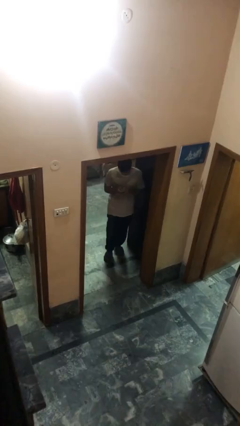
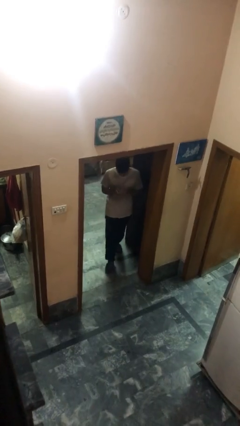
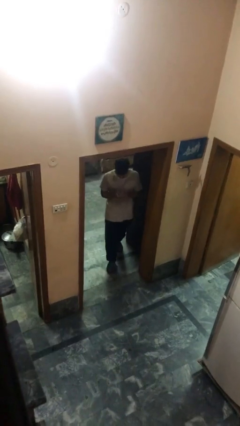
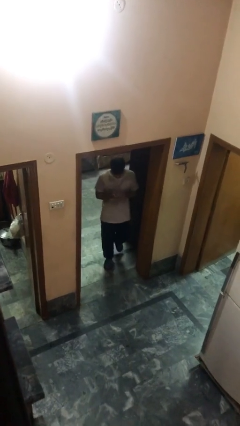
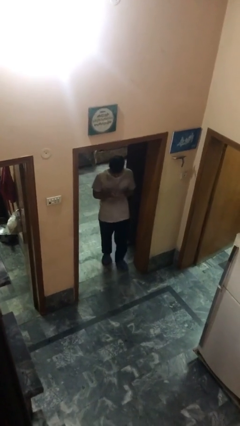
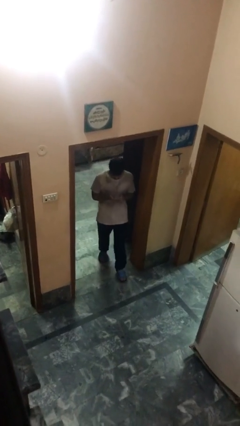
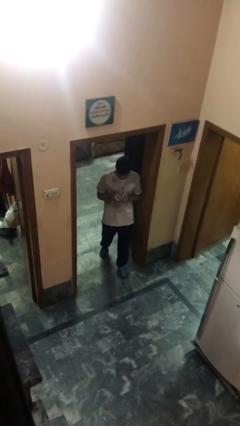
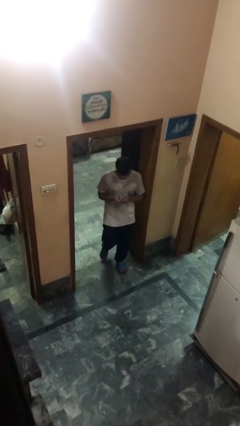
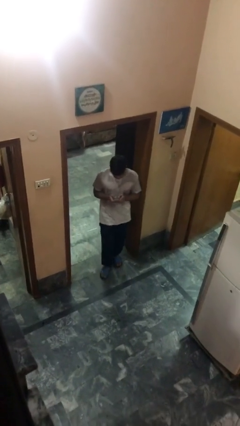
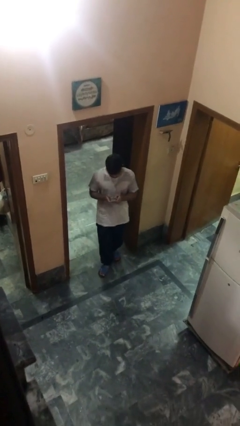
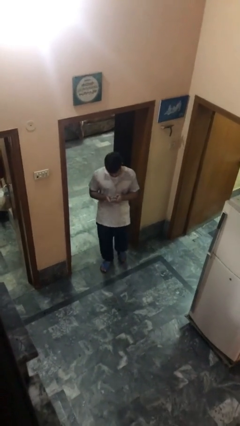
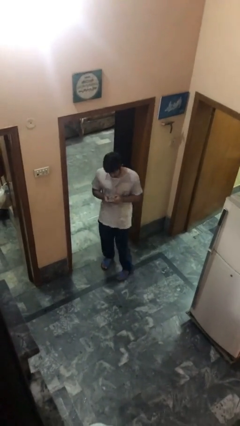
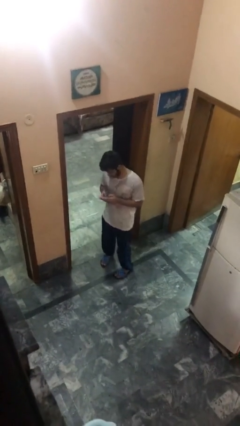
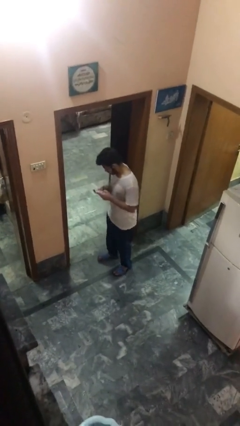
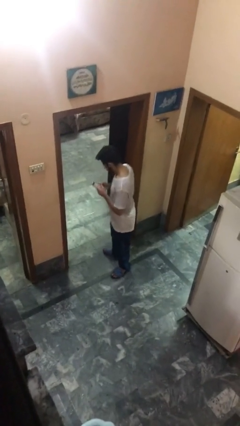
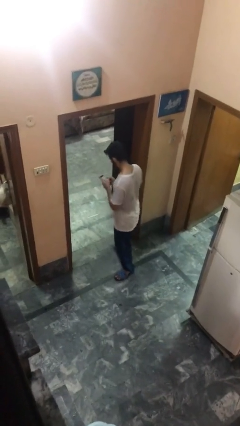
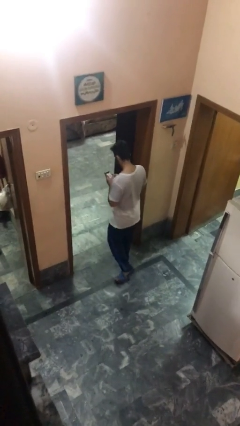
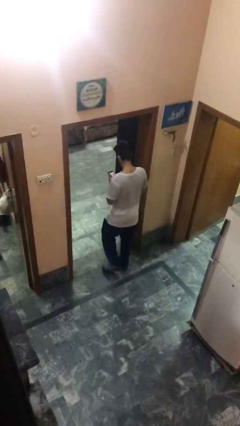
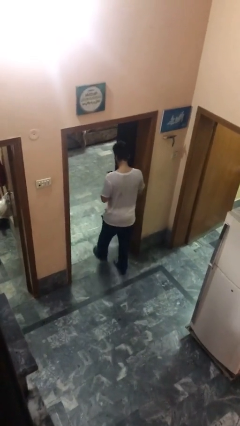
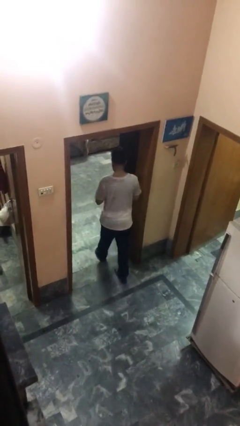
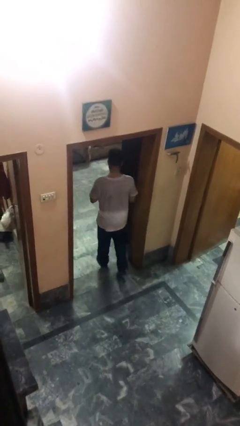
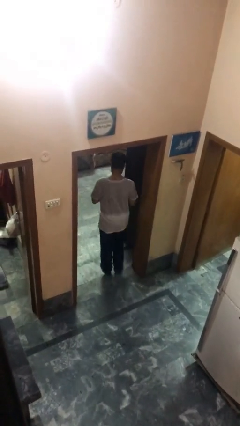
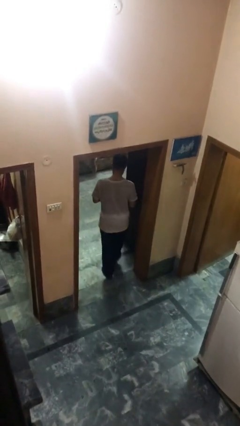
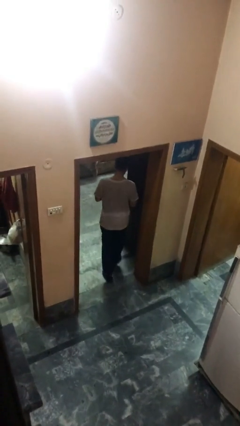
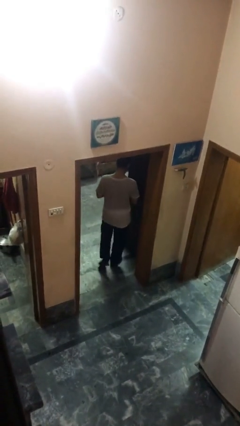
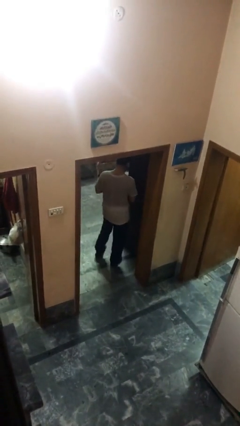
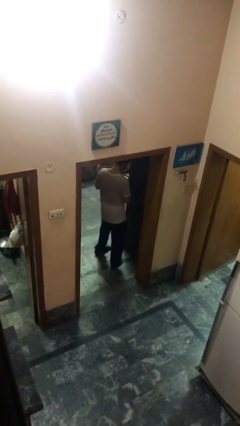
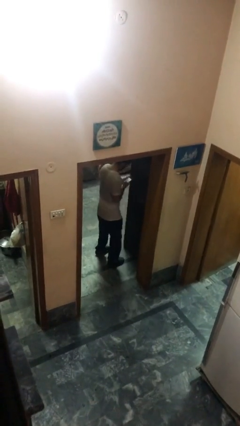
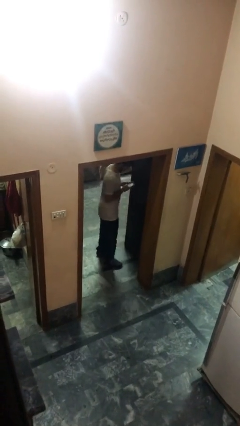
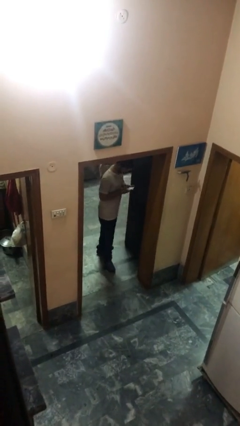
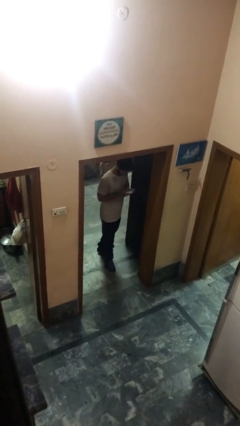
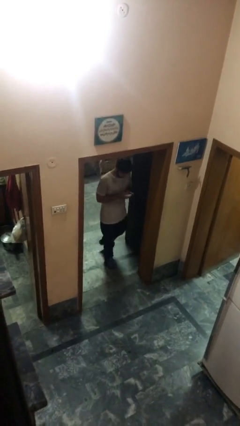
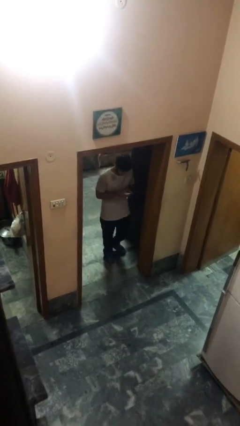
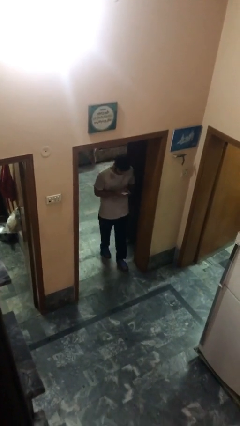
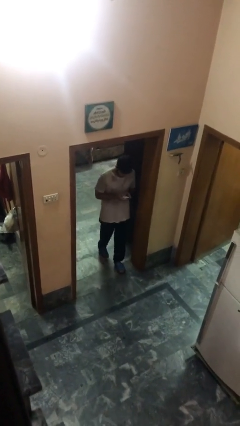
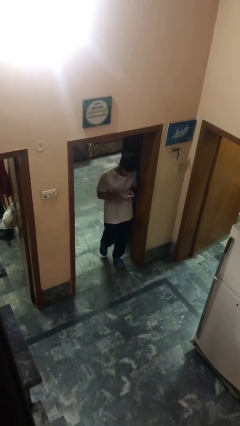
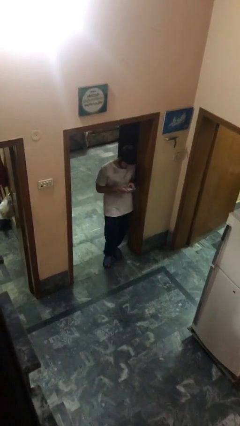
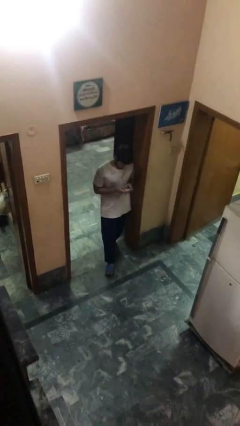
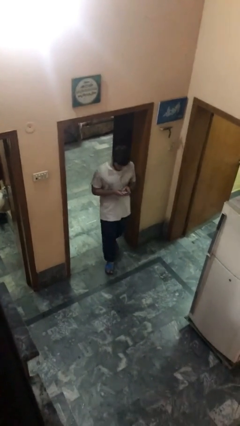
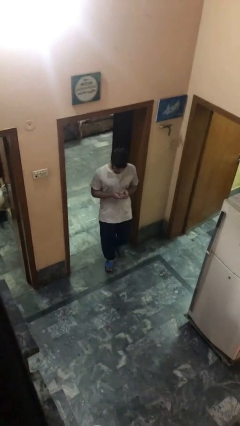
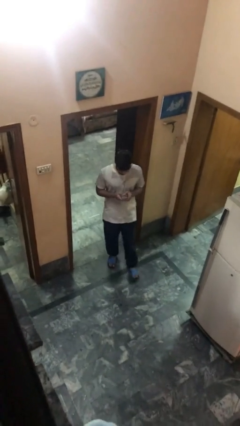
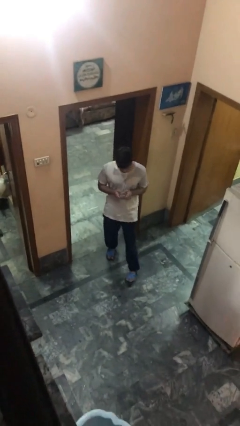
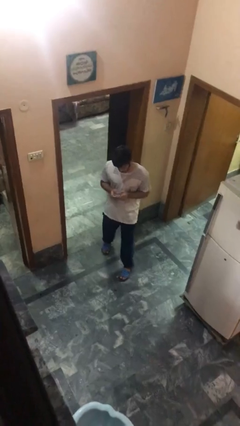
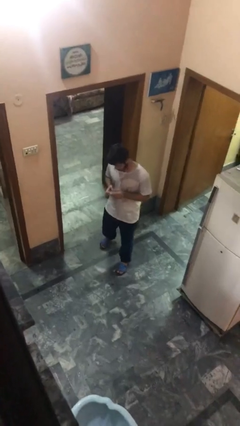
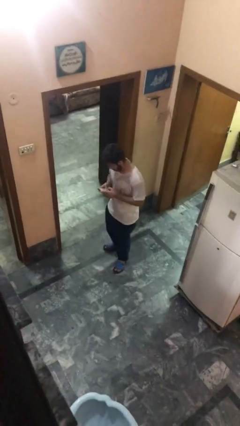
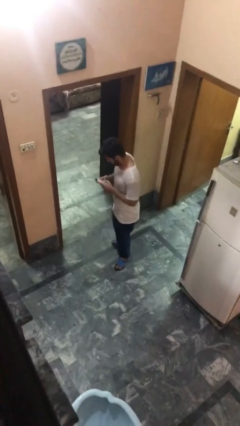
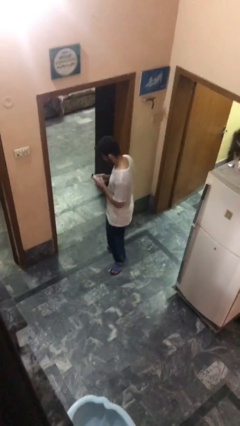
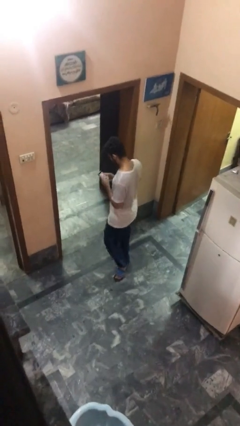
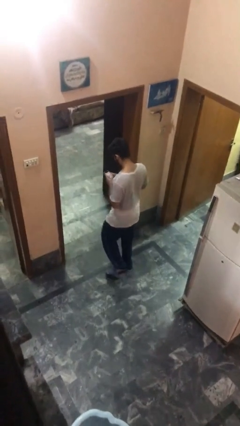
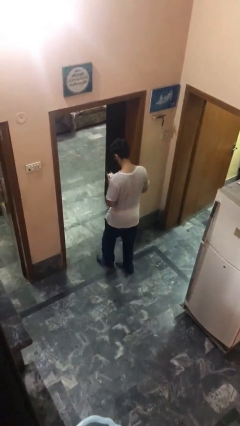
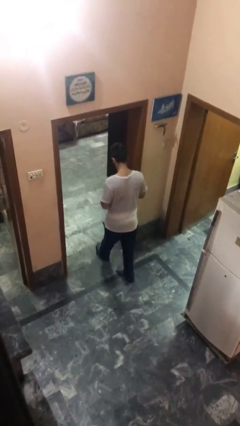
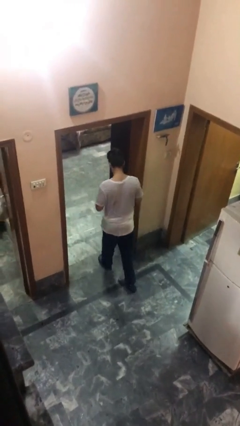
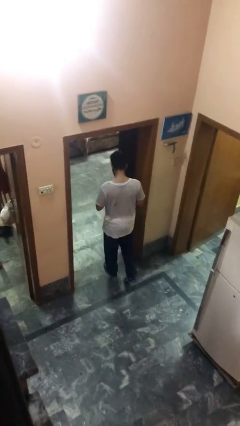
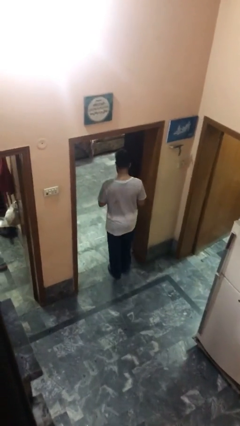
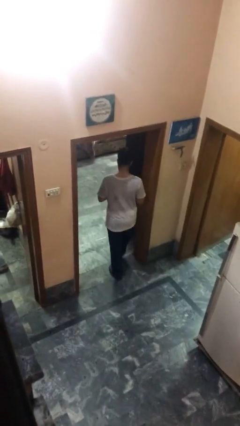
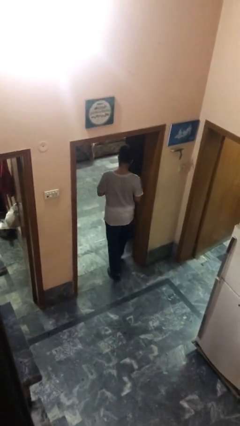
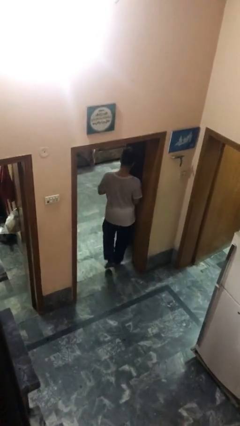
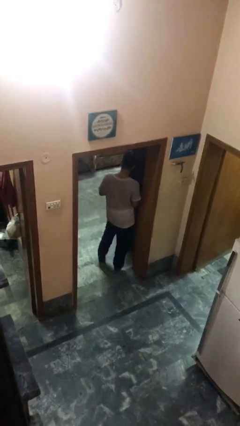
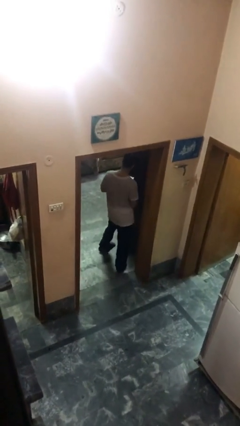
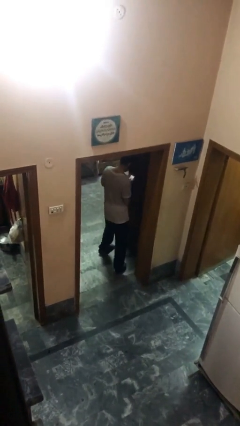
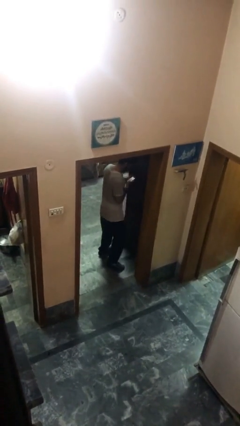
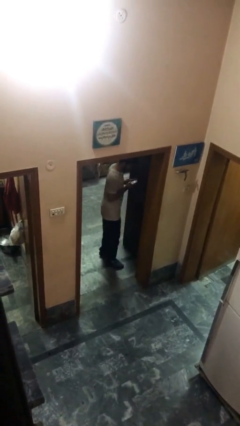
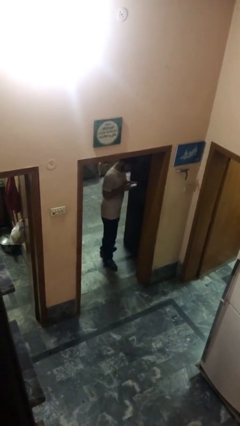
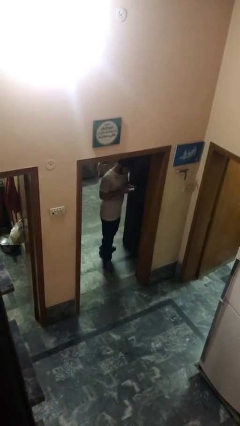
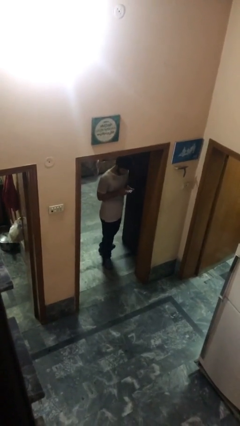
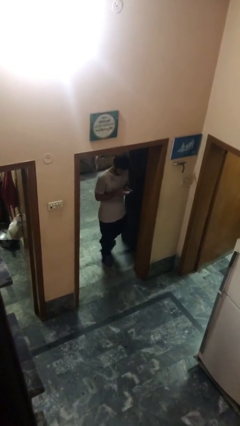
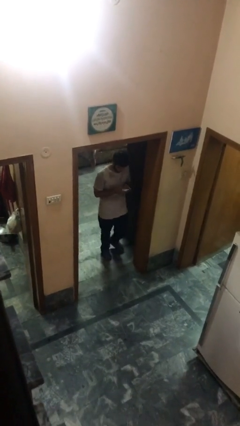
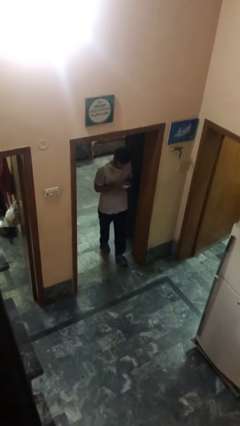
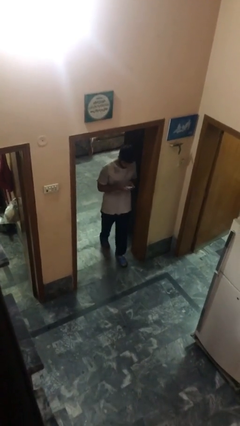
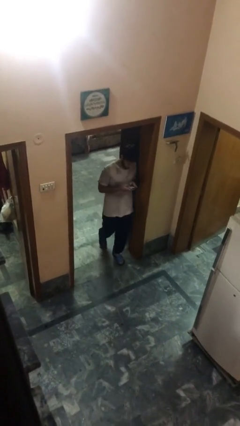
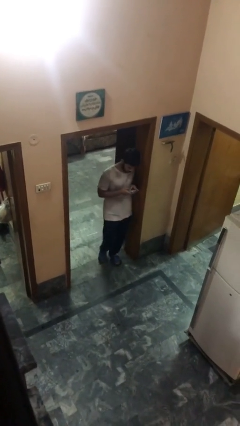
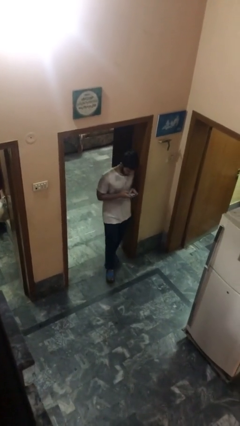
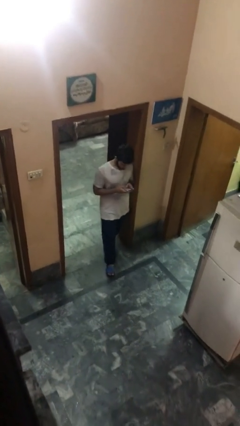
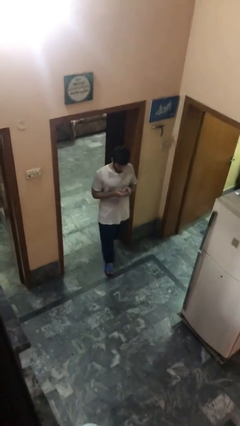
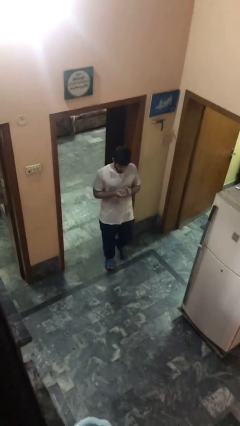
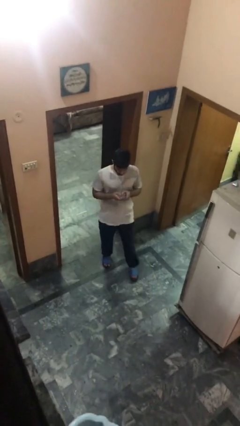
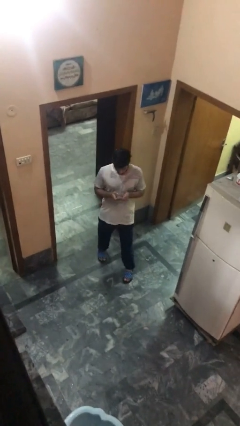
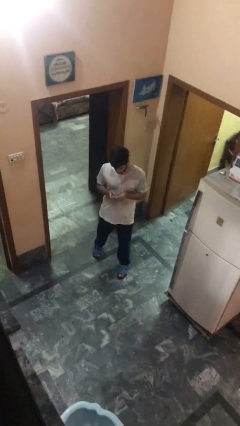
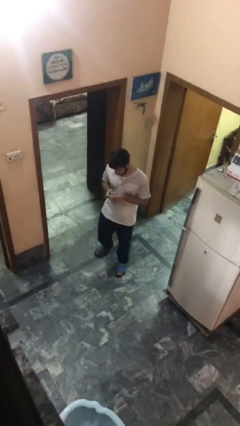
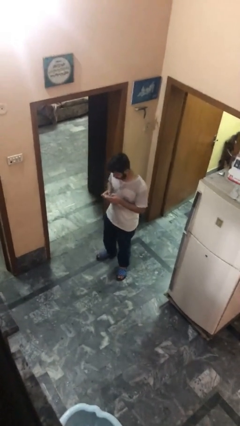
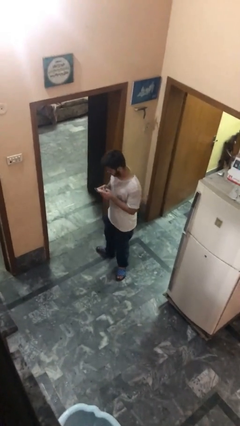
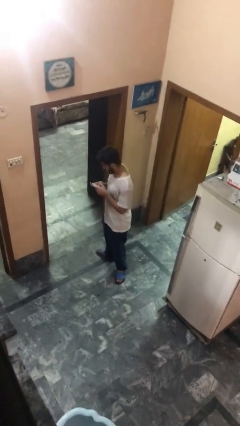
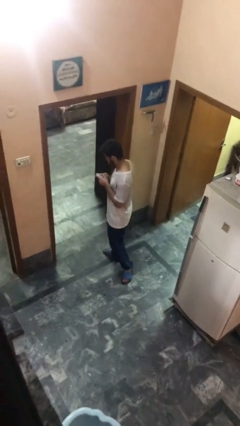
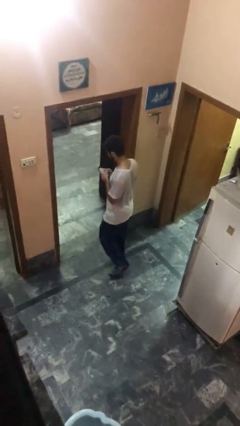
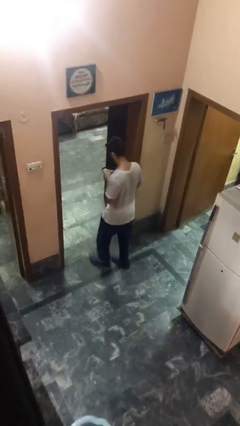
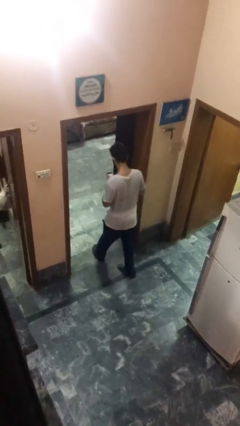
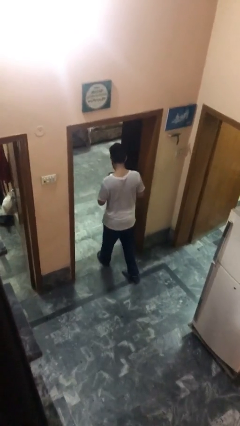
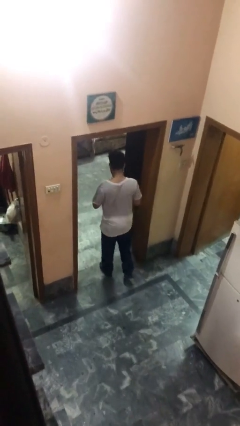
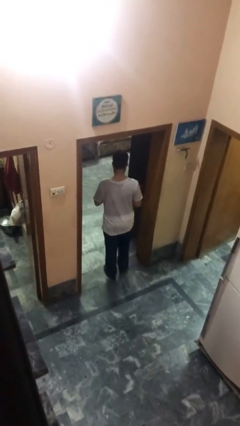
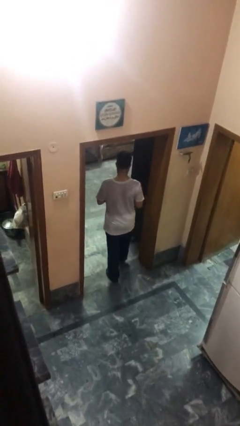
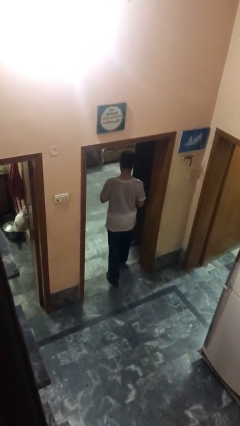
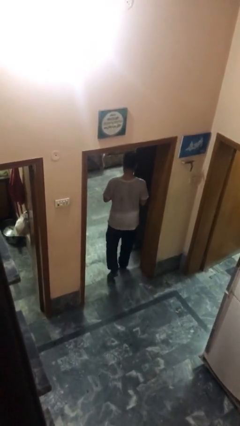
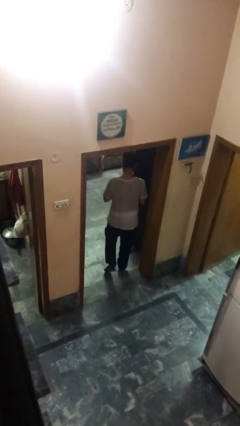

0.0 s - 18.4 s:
person texts on phone
